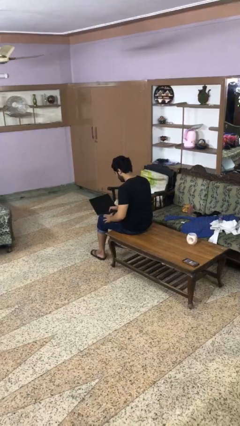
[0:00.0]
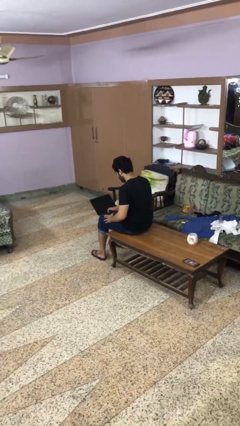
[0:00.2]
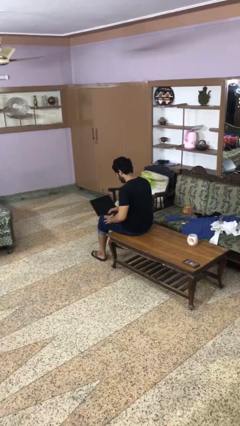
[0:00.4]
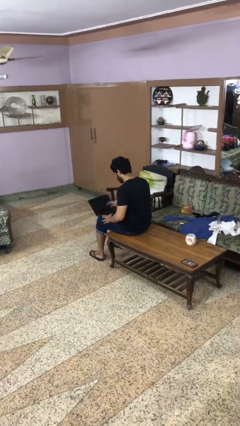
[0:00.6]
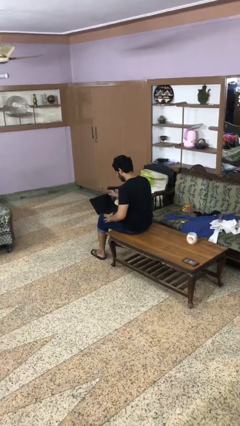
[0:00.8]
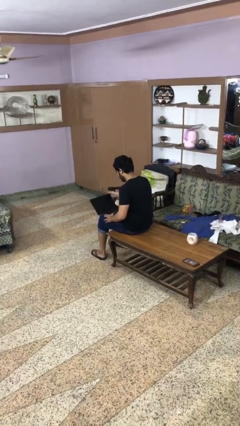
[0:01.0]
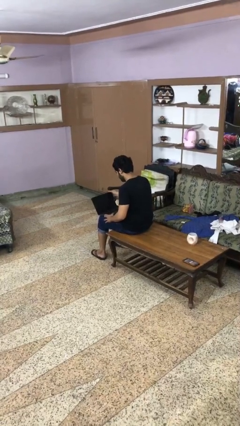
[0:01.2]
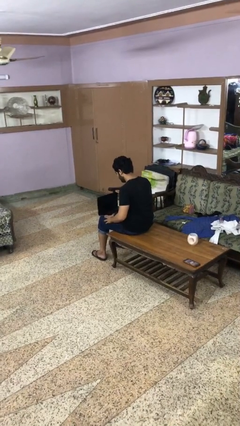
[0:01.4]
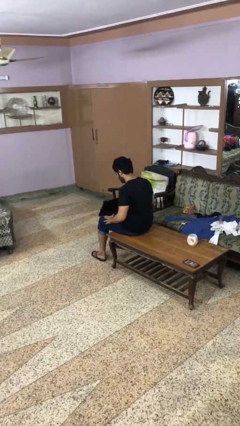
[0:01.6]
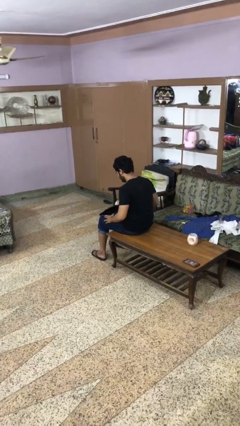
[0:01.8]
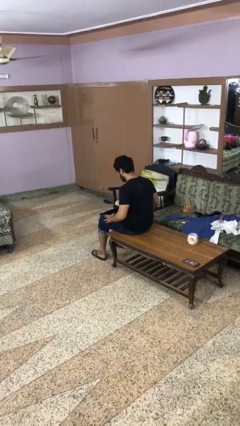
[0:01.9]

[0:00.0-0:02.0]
person closes laptop

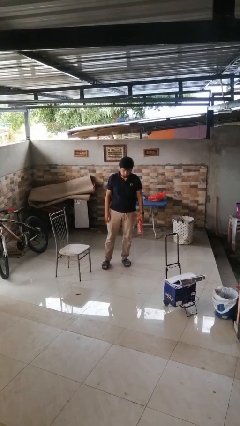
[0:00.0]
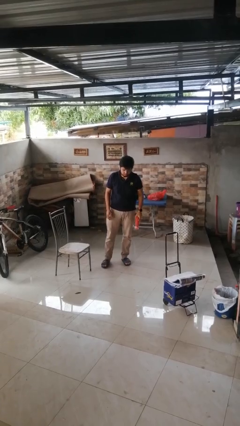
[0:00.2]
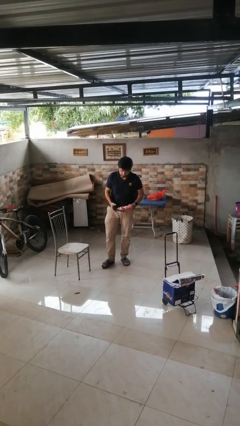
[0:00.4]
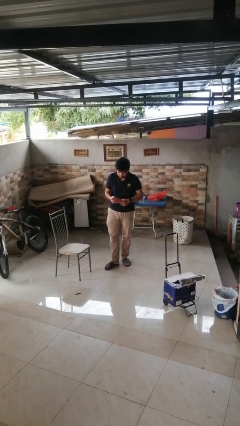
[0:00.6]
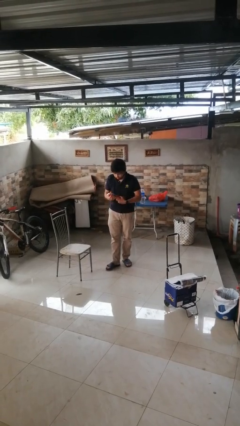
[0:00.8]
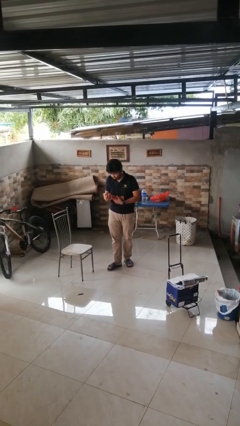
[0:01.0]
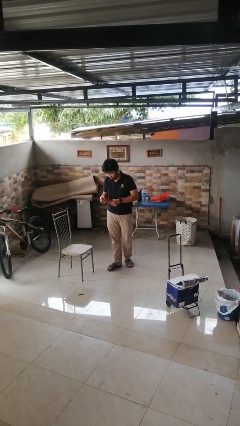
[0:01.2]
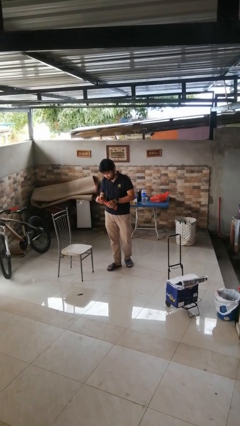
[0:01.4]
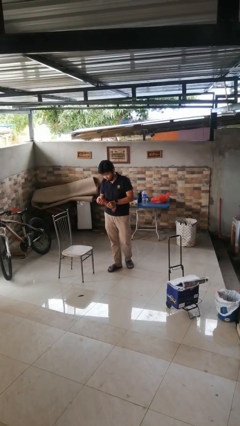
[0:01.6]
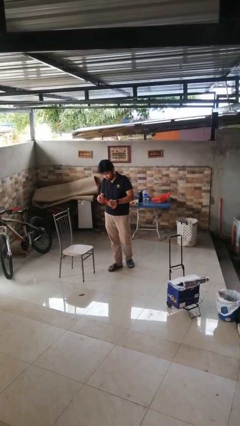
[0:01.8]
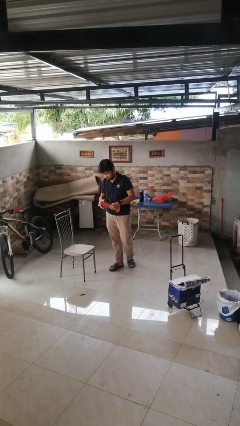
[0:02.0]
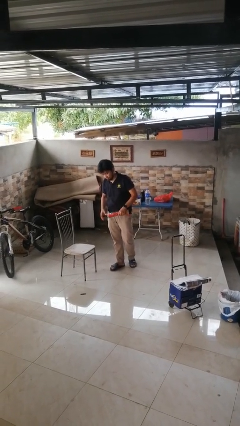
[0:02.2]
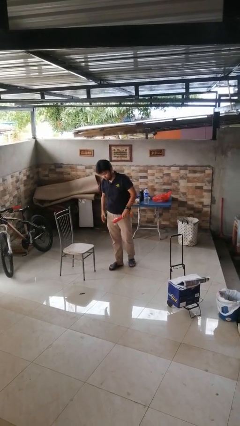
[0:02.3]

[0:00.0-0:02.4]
person squeezes object

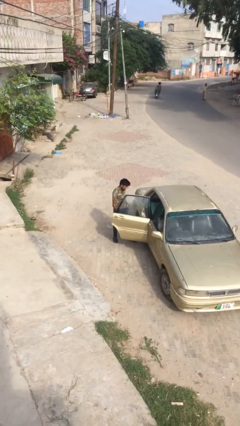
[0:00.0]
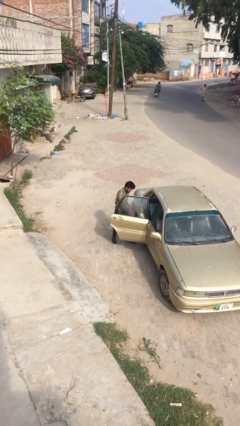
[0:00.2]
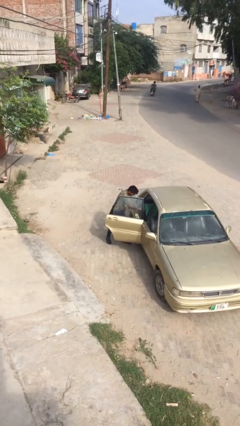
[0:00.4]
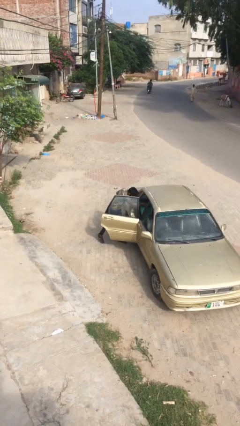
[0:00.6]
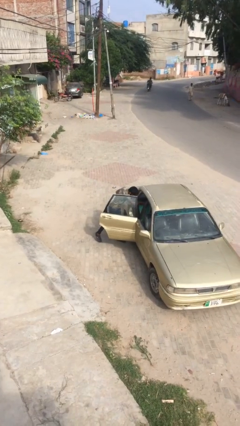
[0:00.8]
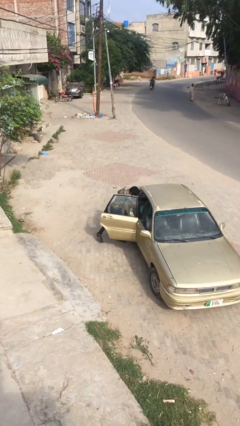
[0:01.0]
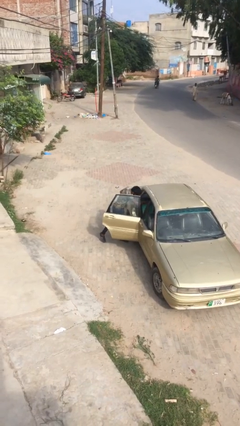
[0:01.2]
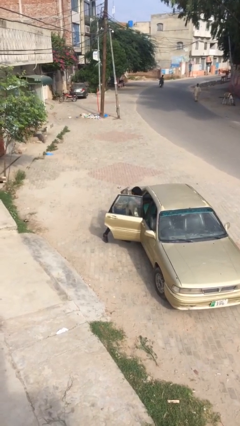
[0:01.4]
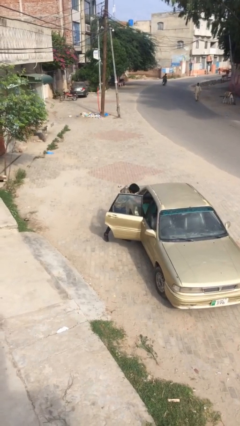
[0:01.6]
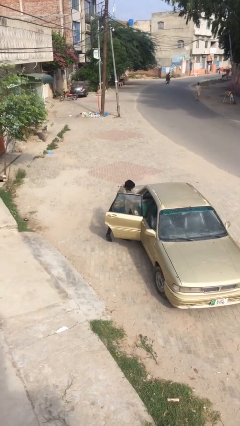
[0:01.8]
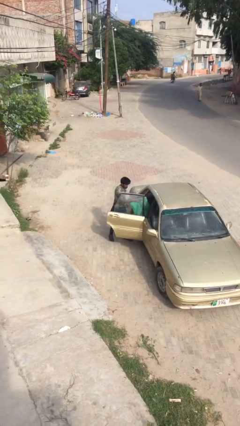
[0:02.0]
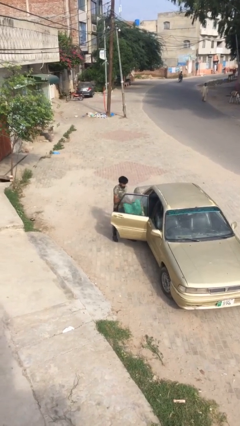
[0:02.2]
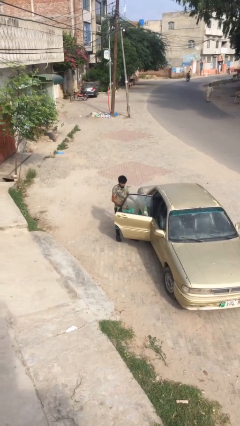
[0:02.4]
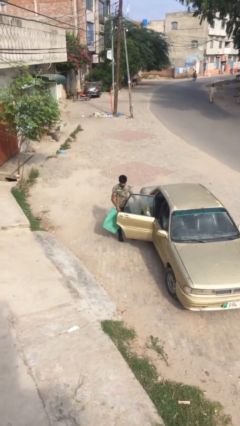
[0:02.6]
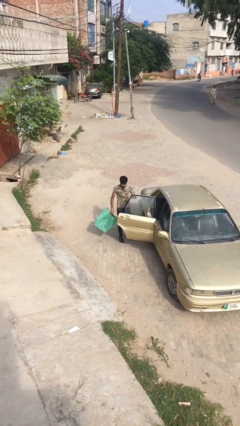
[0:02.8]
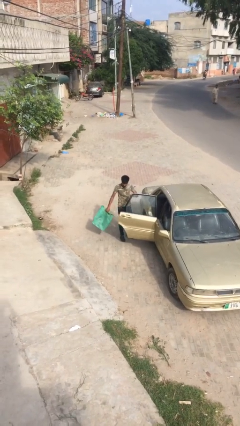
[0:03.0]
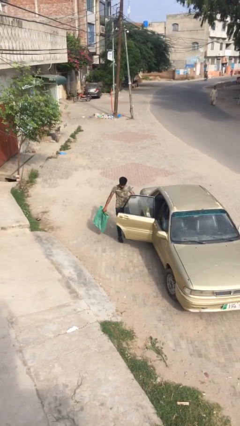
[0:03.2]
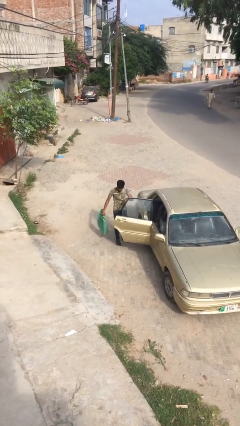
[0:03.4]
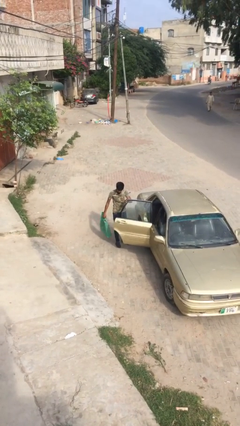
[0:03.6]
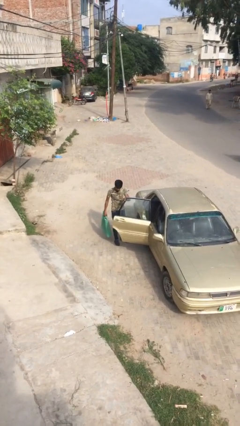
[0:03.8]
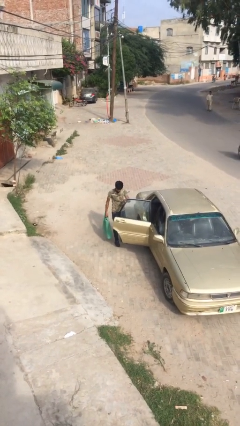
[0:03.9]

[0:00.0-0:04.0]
person unloads car

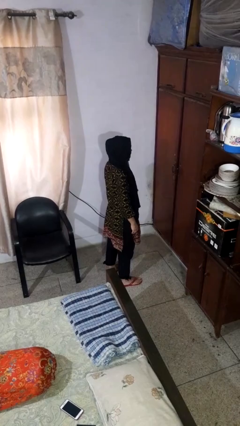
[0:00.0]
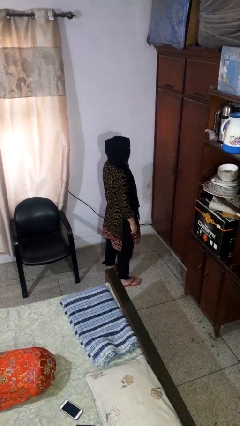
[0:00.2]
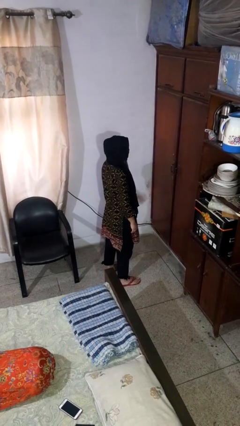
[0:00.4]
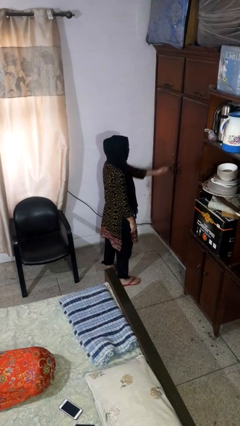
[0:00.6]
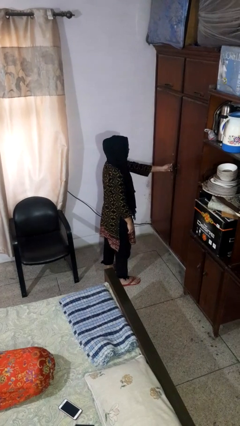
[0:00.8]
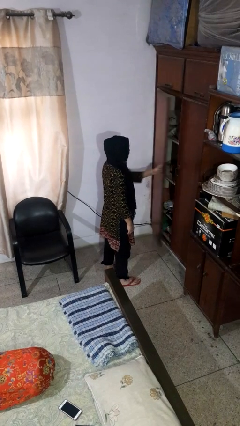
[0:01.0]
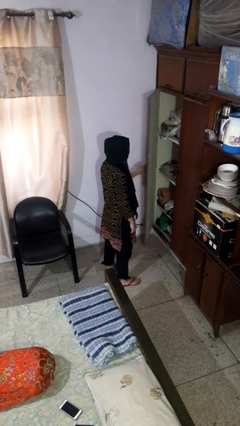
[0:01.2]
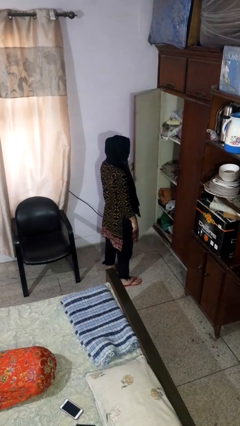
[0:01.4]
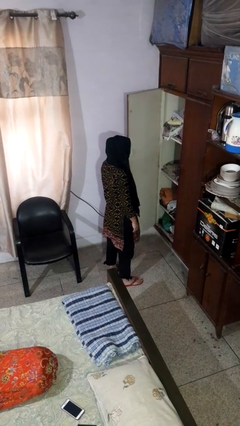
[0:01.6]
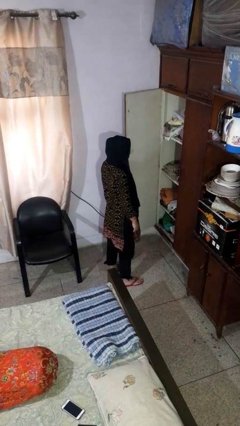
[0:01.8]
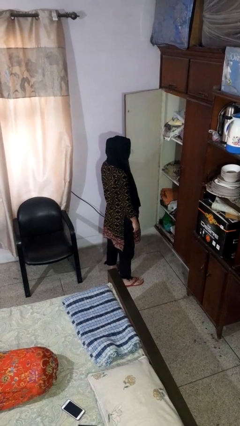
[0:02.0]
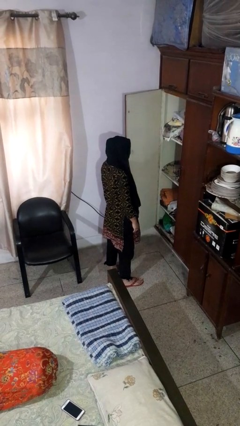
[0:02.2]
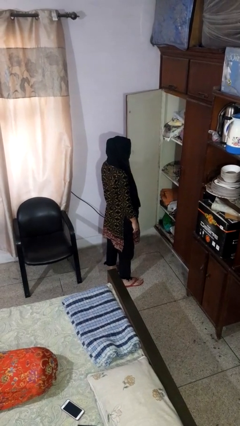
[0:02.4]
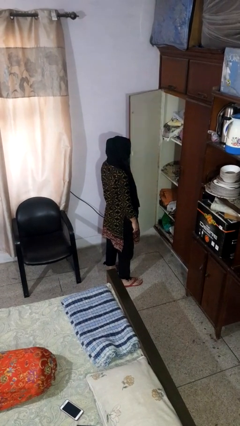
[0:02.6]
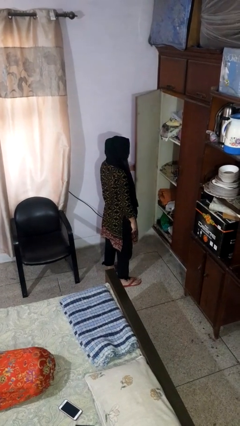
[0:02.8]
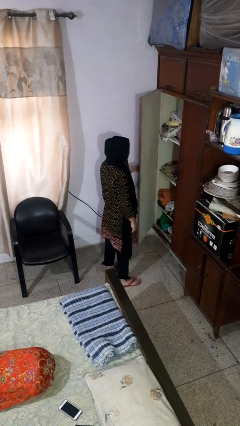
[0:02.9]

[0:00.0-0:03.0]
person opens closet door

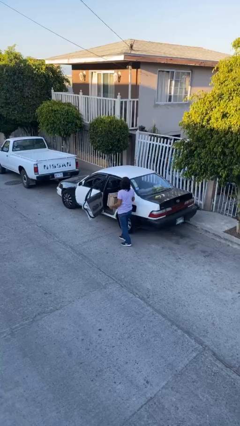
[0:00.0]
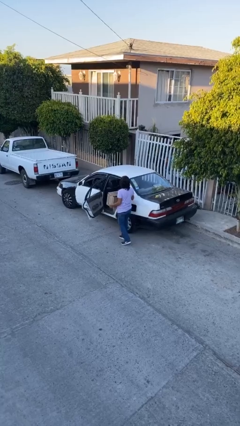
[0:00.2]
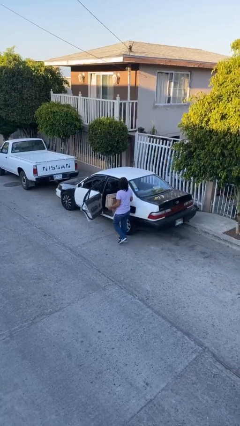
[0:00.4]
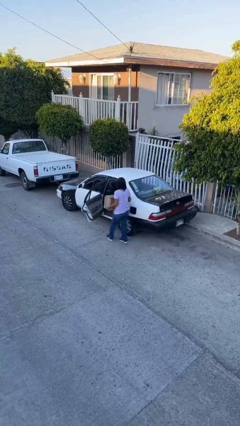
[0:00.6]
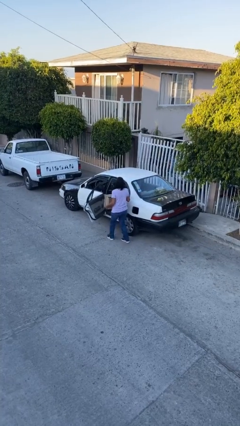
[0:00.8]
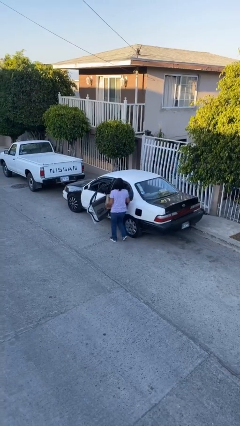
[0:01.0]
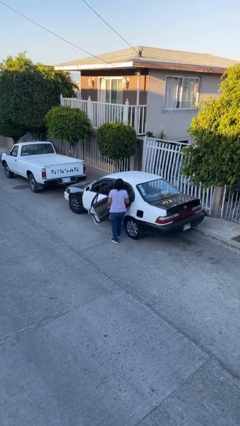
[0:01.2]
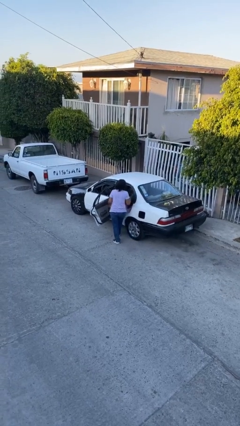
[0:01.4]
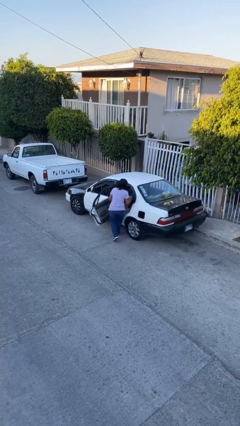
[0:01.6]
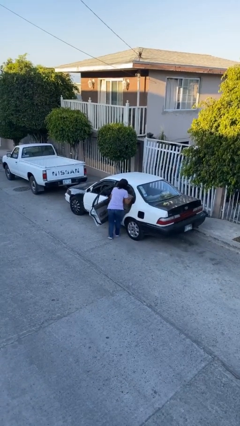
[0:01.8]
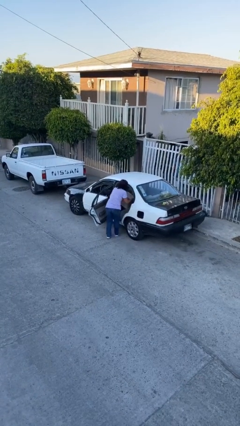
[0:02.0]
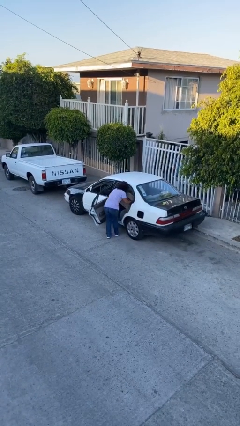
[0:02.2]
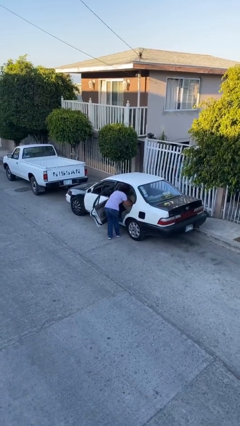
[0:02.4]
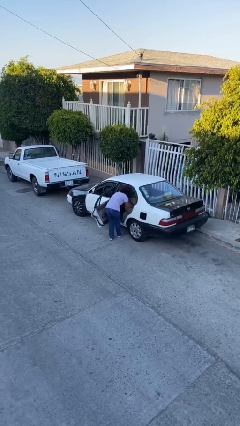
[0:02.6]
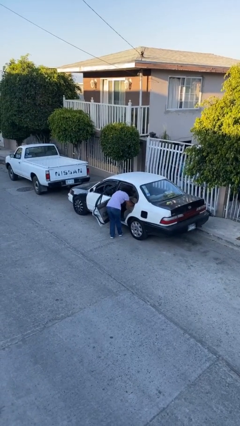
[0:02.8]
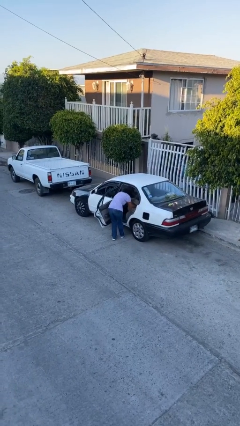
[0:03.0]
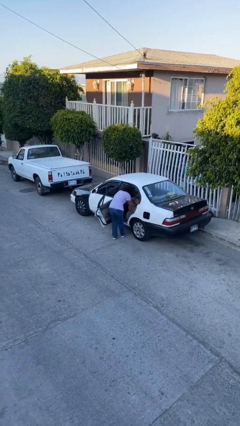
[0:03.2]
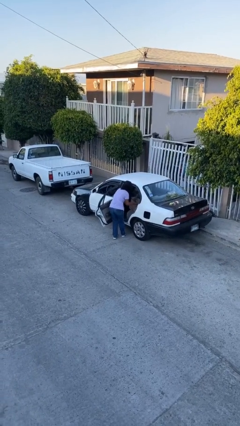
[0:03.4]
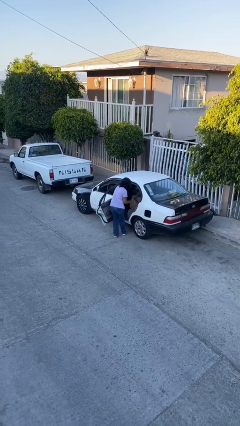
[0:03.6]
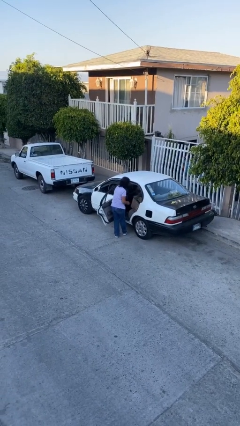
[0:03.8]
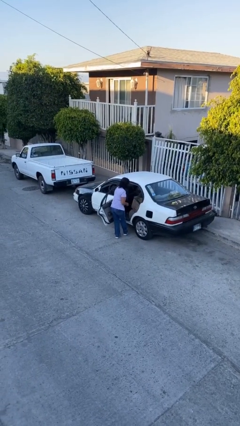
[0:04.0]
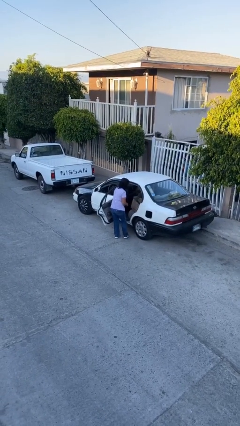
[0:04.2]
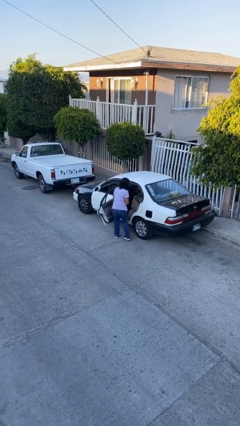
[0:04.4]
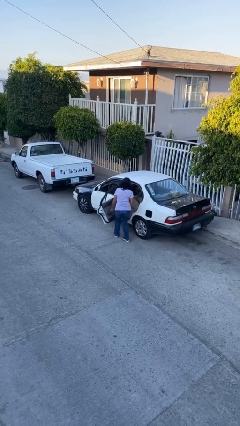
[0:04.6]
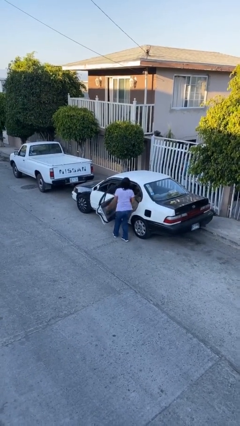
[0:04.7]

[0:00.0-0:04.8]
person loads car

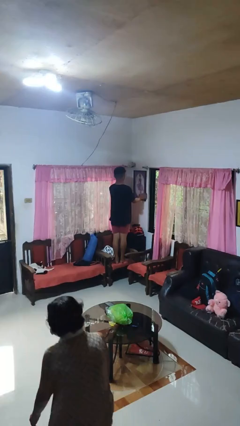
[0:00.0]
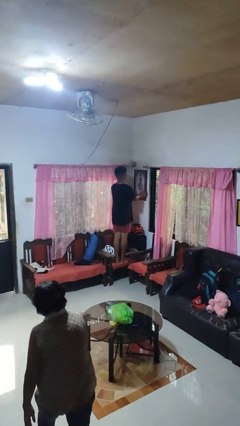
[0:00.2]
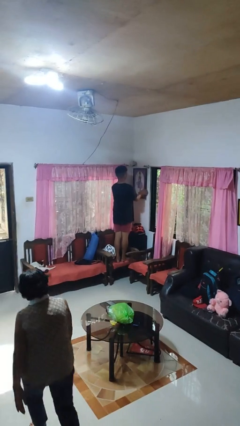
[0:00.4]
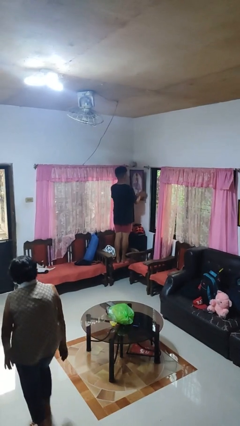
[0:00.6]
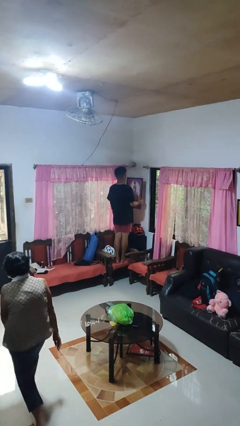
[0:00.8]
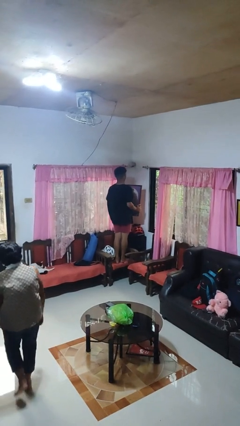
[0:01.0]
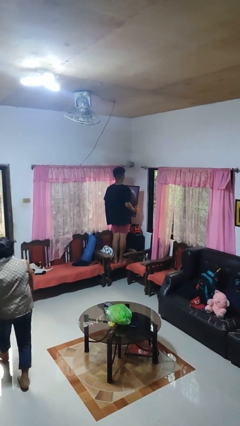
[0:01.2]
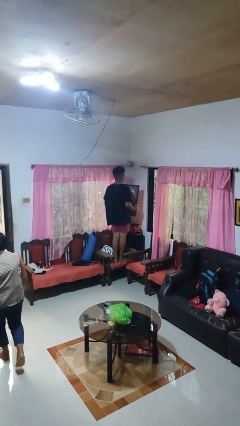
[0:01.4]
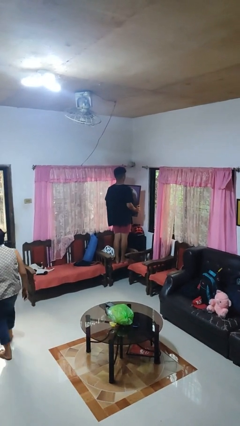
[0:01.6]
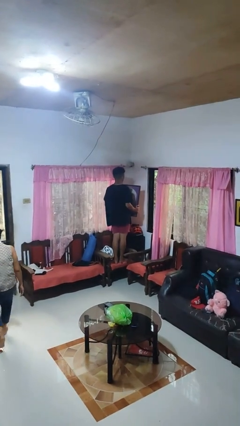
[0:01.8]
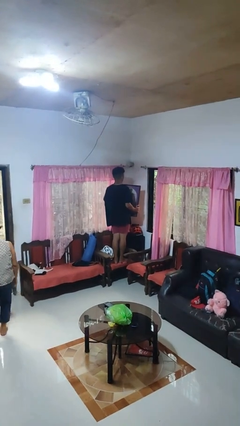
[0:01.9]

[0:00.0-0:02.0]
person takes down picture frame
